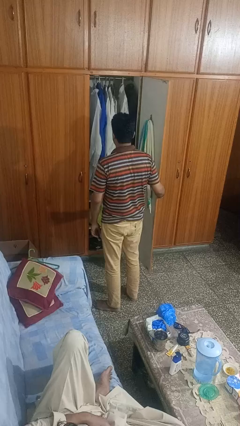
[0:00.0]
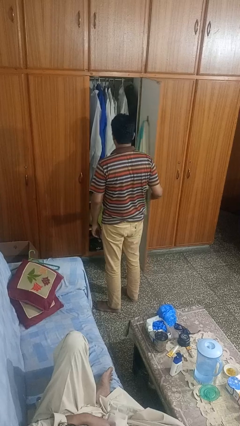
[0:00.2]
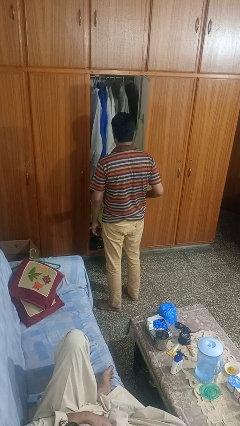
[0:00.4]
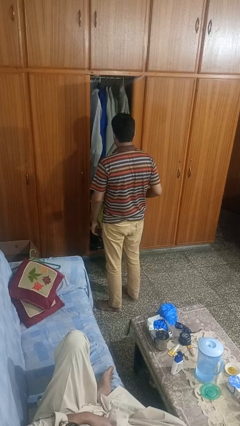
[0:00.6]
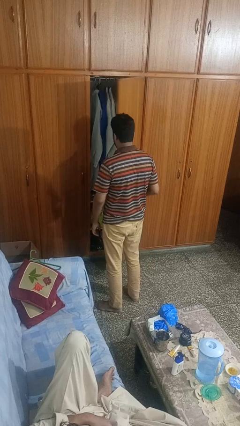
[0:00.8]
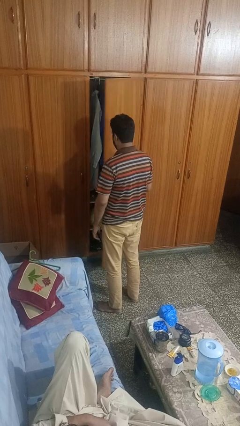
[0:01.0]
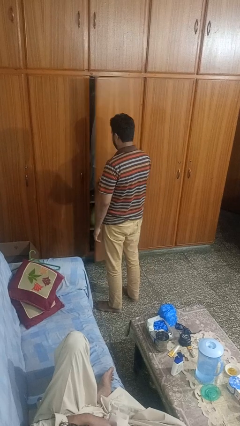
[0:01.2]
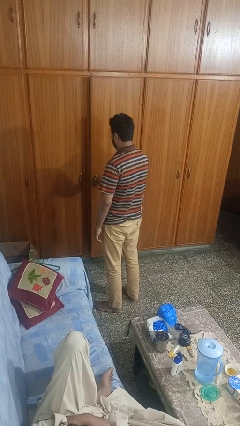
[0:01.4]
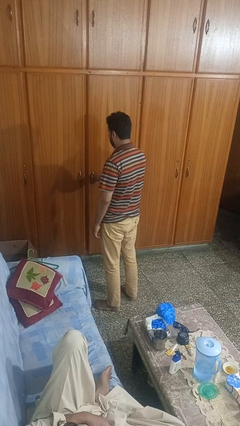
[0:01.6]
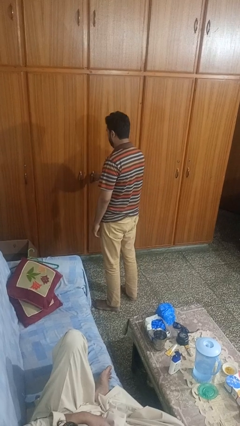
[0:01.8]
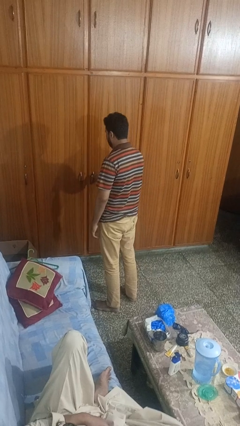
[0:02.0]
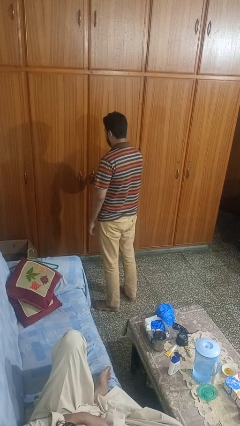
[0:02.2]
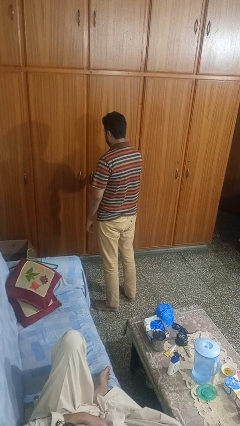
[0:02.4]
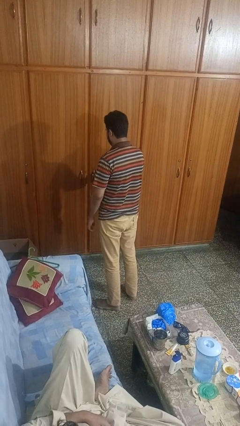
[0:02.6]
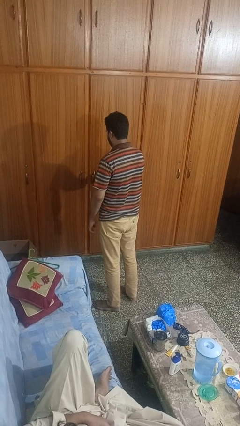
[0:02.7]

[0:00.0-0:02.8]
person closes closet door

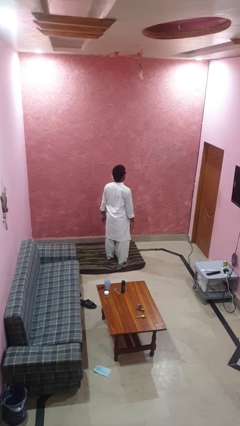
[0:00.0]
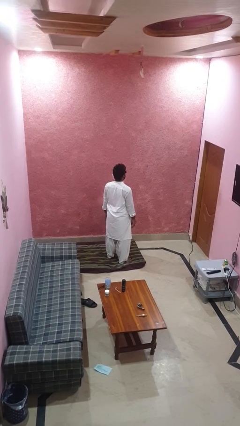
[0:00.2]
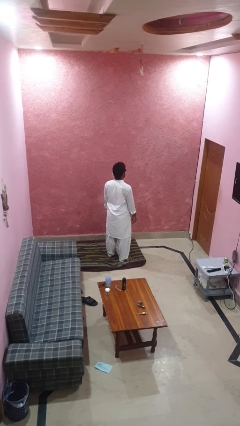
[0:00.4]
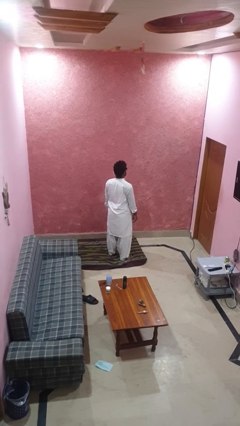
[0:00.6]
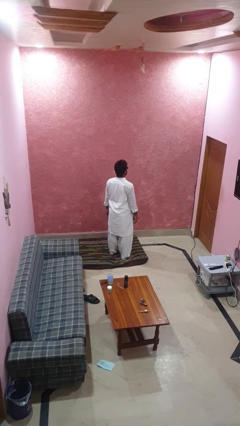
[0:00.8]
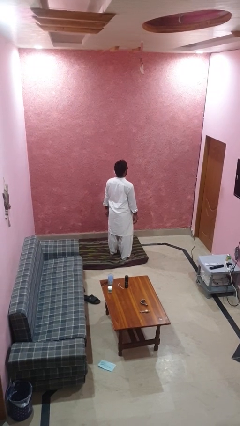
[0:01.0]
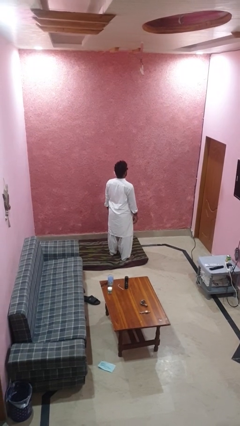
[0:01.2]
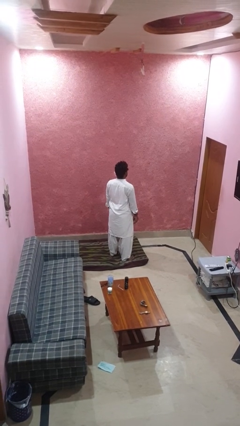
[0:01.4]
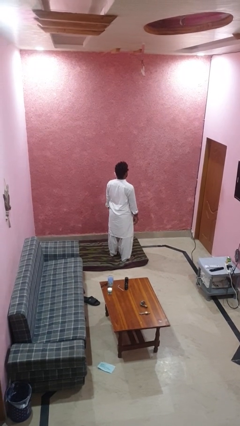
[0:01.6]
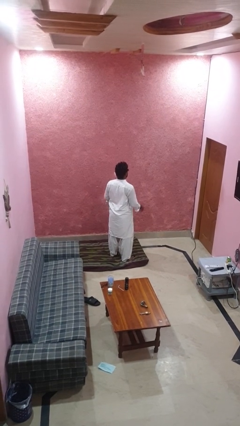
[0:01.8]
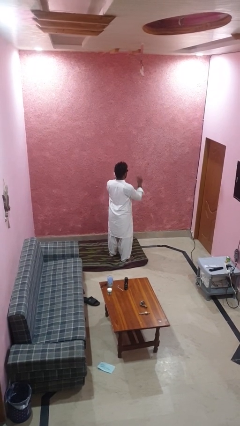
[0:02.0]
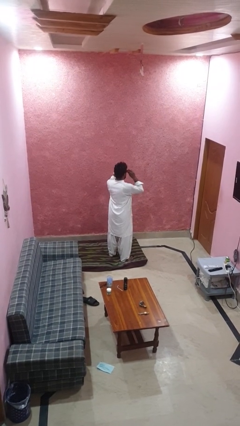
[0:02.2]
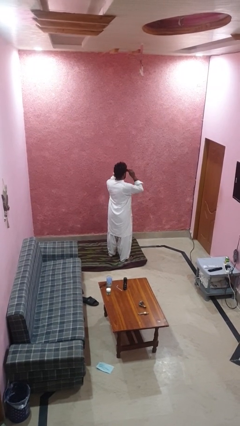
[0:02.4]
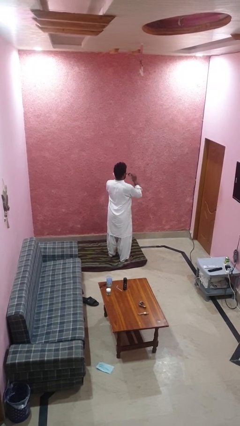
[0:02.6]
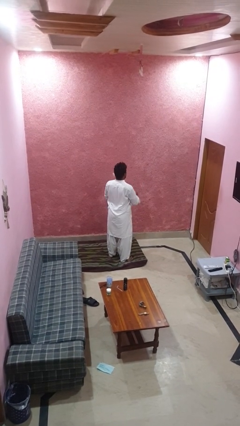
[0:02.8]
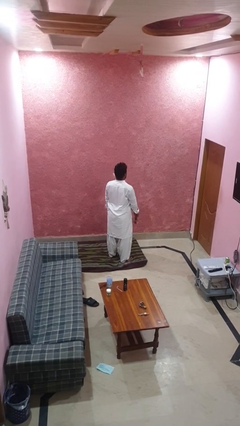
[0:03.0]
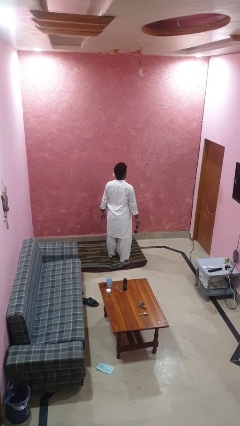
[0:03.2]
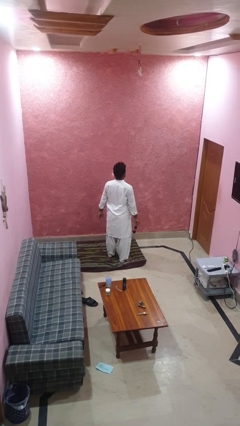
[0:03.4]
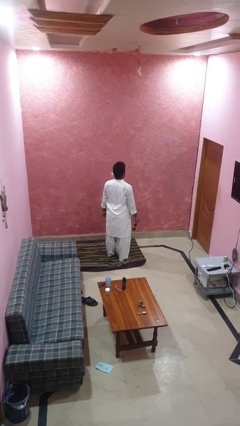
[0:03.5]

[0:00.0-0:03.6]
person takes off sunglasses

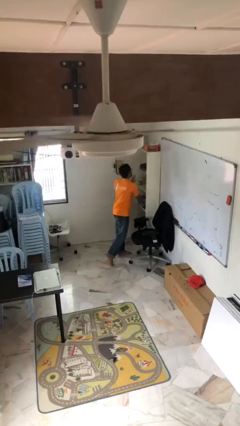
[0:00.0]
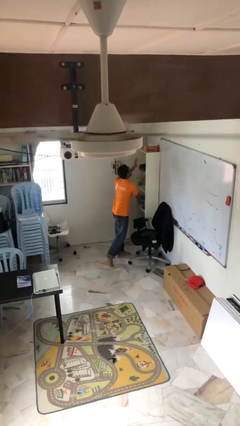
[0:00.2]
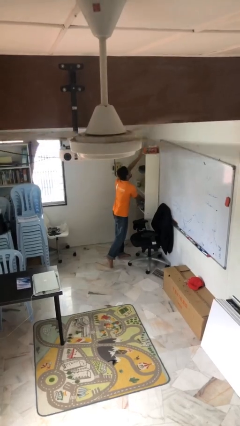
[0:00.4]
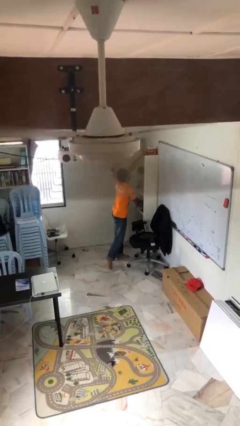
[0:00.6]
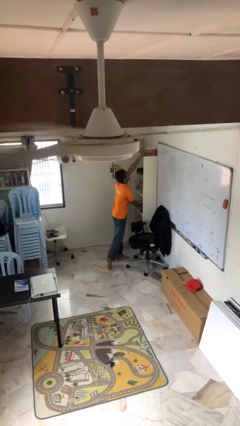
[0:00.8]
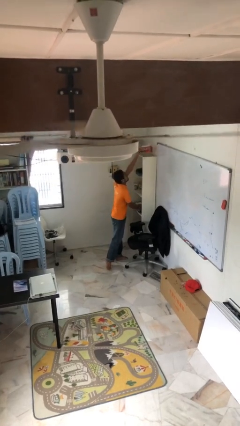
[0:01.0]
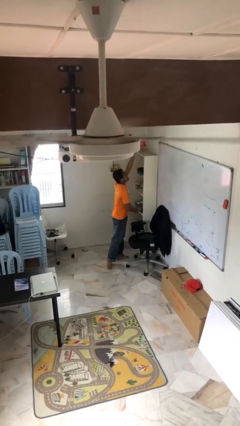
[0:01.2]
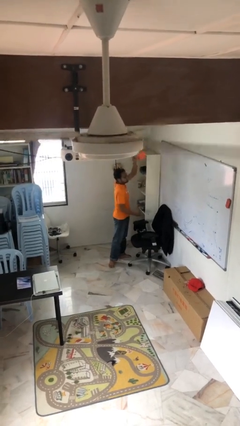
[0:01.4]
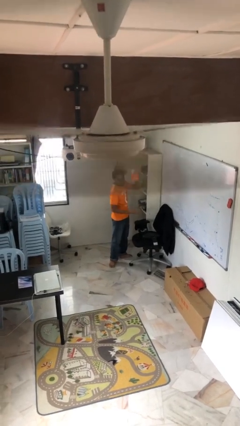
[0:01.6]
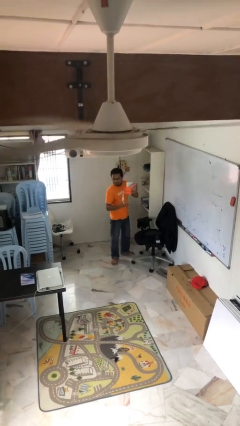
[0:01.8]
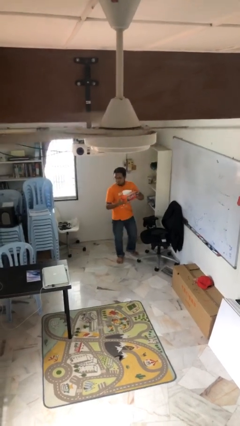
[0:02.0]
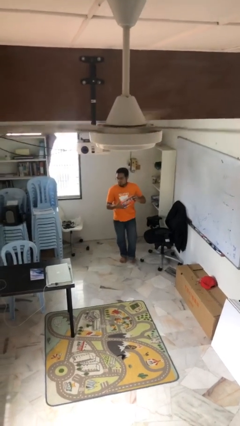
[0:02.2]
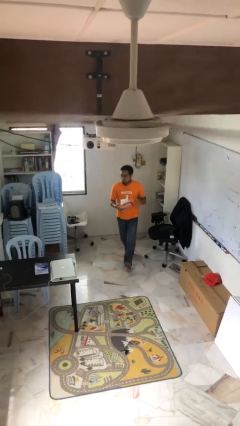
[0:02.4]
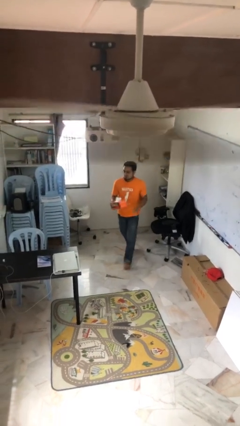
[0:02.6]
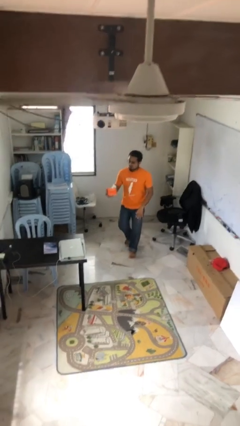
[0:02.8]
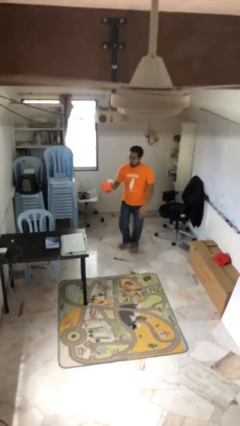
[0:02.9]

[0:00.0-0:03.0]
person picks up object from shelf

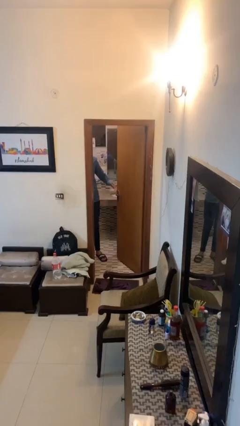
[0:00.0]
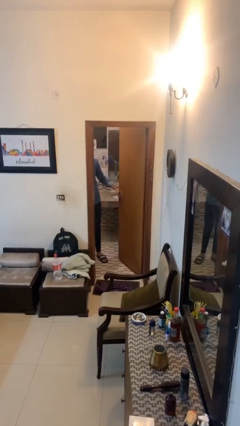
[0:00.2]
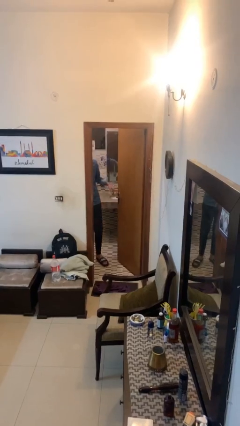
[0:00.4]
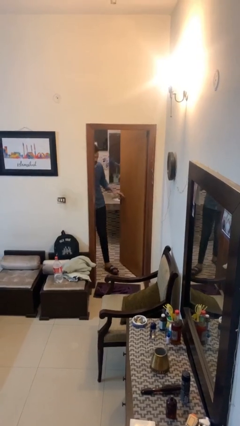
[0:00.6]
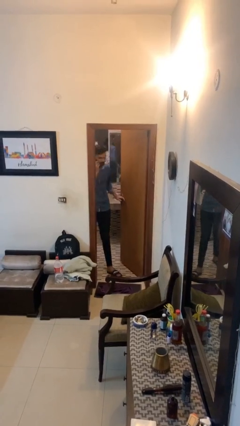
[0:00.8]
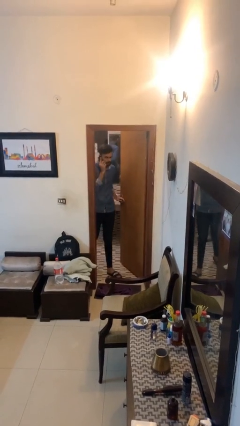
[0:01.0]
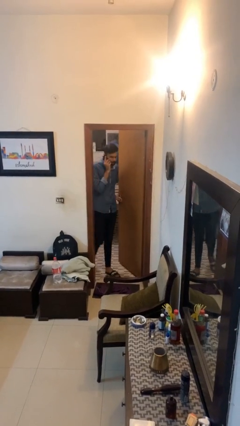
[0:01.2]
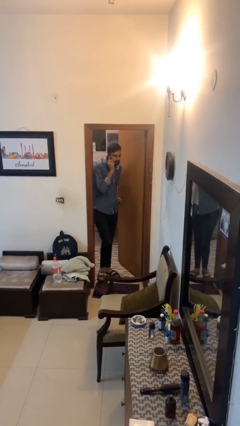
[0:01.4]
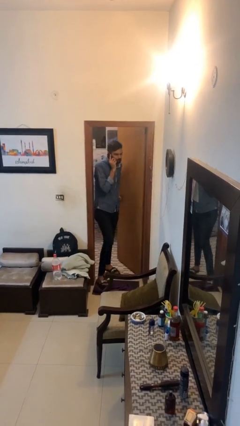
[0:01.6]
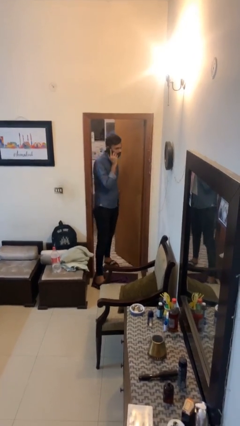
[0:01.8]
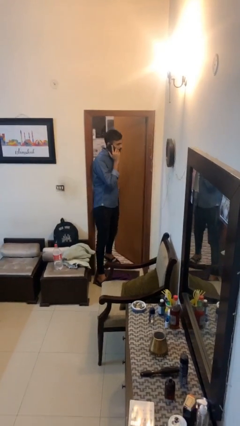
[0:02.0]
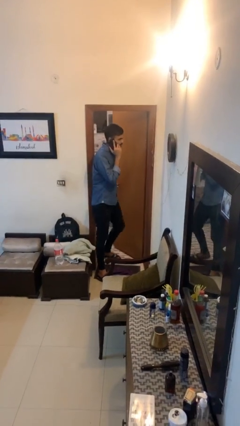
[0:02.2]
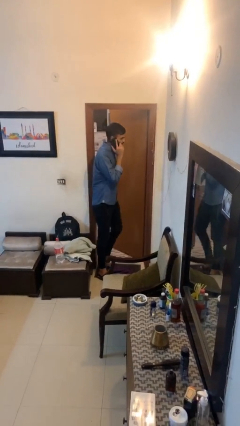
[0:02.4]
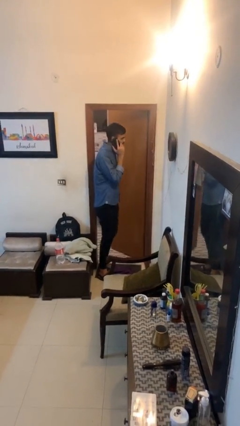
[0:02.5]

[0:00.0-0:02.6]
person enters scene through structure

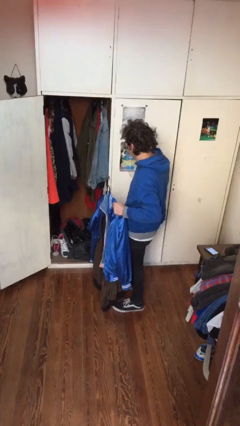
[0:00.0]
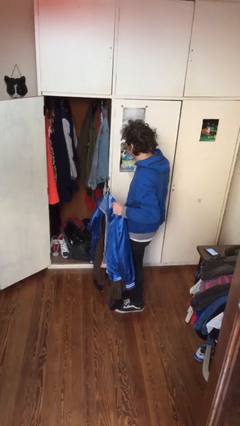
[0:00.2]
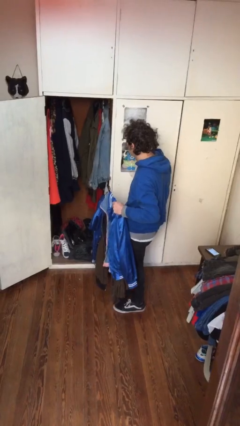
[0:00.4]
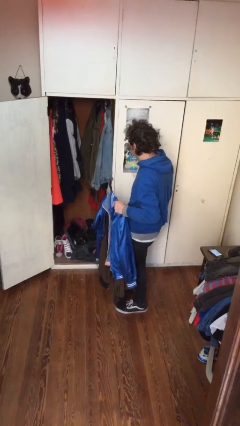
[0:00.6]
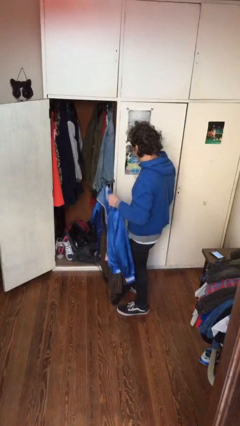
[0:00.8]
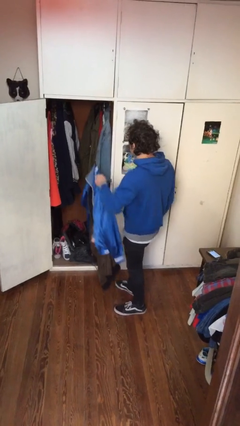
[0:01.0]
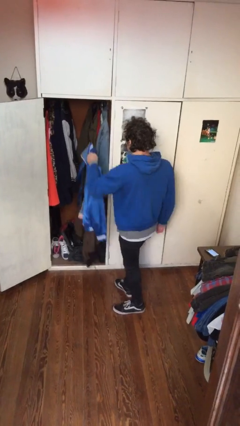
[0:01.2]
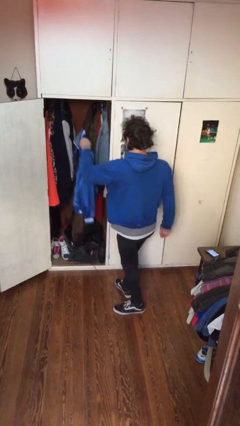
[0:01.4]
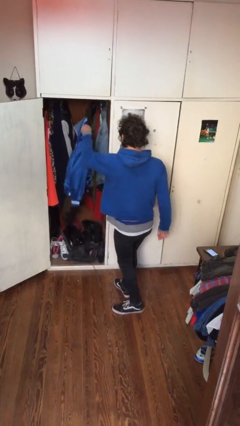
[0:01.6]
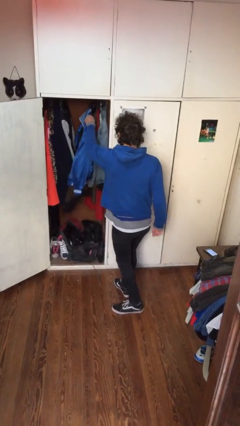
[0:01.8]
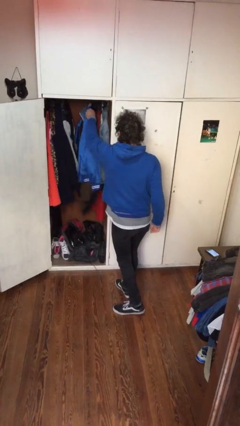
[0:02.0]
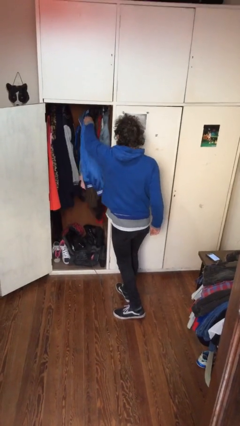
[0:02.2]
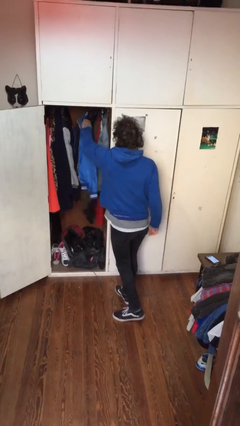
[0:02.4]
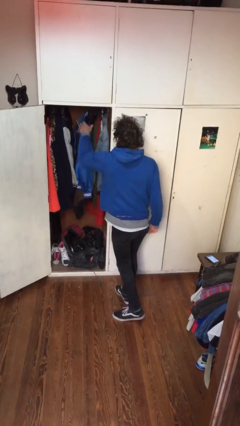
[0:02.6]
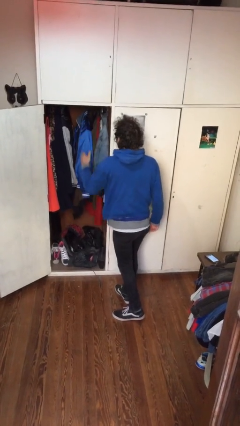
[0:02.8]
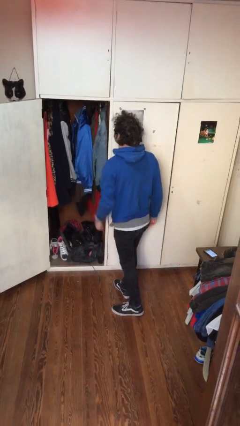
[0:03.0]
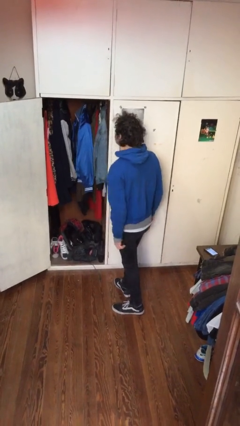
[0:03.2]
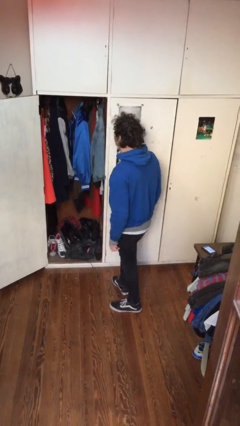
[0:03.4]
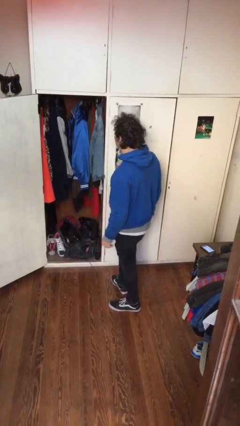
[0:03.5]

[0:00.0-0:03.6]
person puts clothes into closet

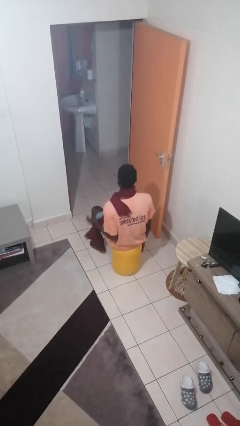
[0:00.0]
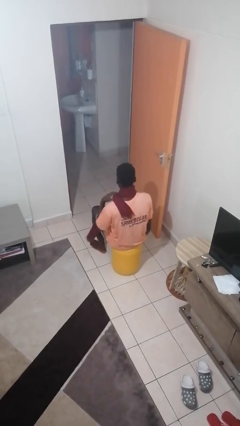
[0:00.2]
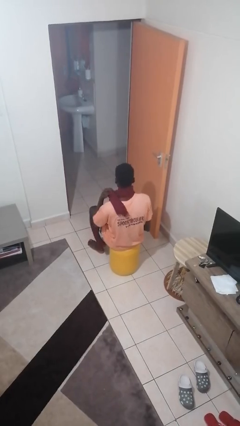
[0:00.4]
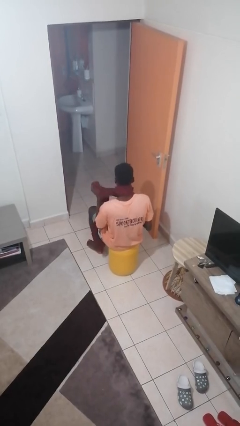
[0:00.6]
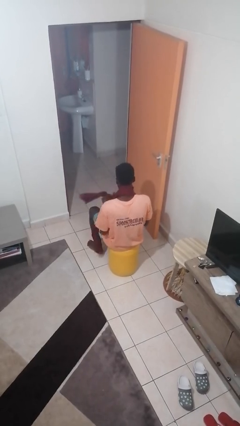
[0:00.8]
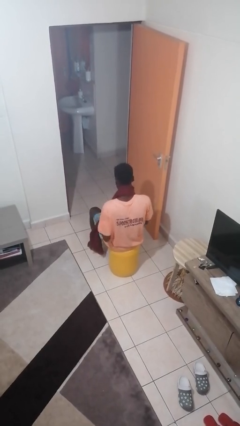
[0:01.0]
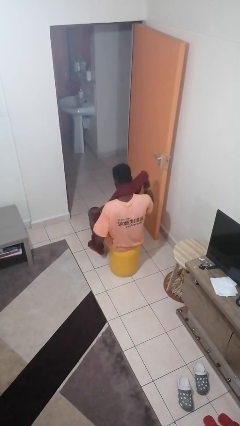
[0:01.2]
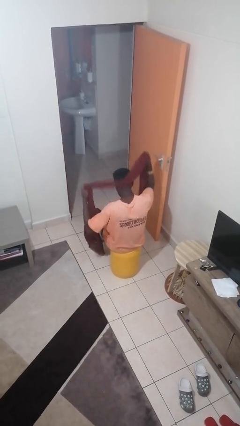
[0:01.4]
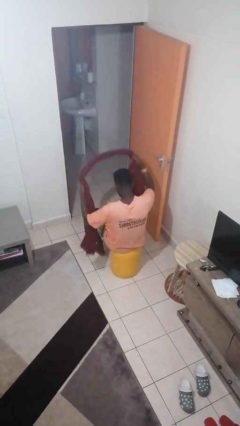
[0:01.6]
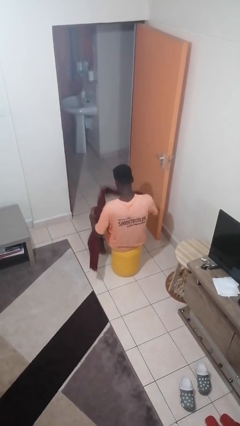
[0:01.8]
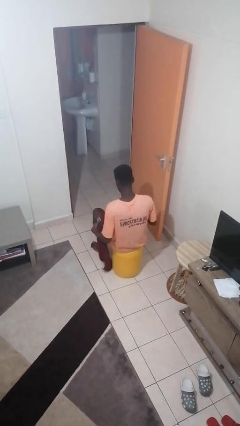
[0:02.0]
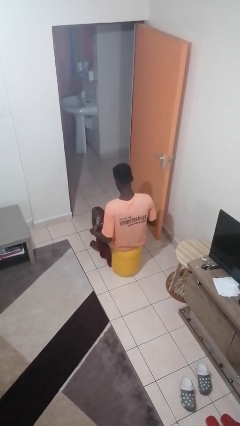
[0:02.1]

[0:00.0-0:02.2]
person takes off scarf
